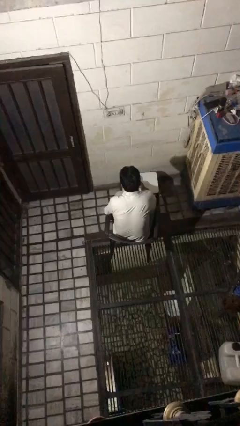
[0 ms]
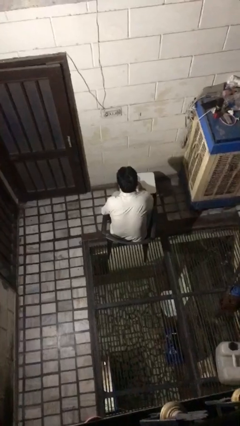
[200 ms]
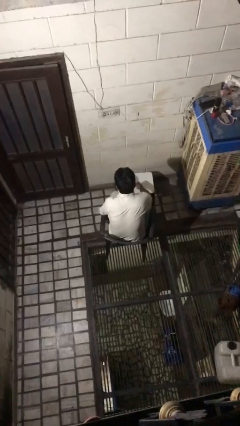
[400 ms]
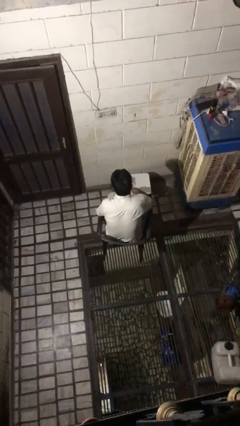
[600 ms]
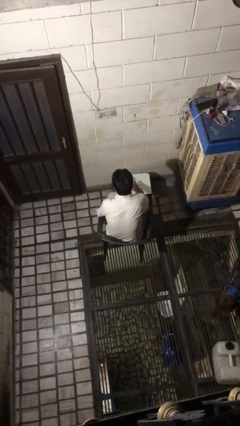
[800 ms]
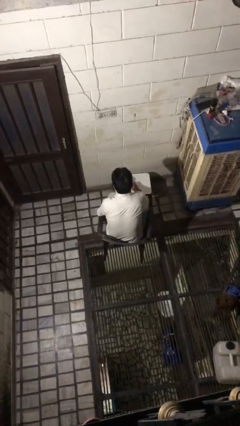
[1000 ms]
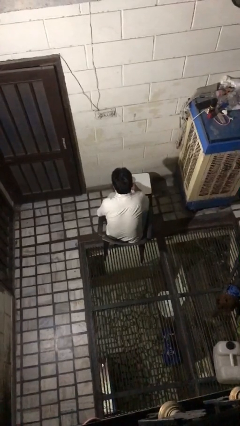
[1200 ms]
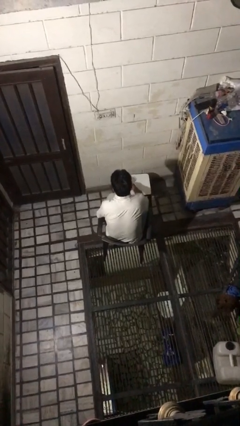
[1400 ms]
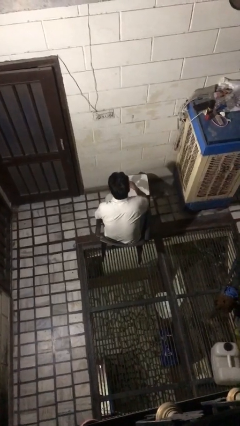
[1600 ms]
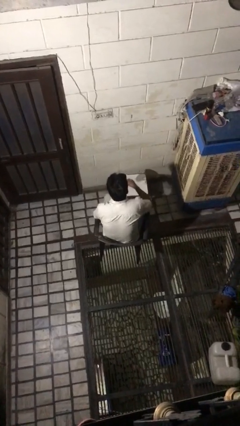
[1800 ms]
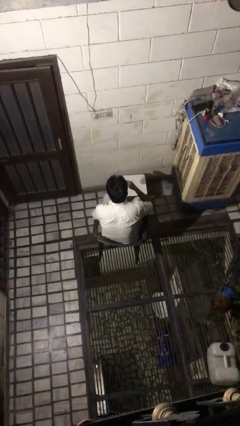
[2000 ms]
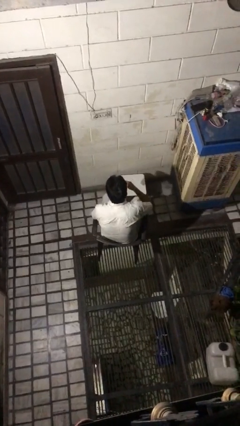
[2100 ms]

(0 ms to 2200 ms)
person picks up object from table

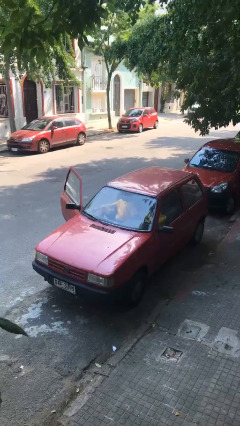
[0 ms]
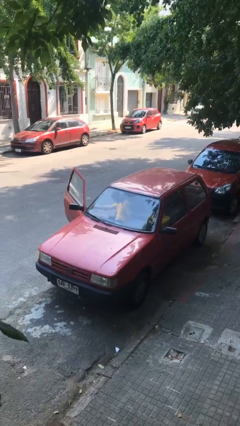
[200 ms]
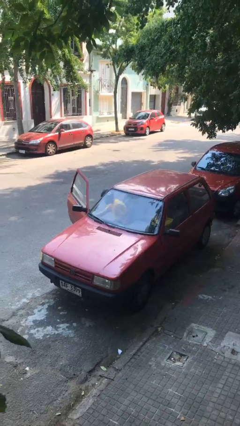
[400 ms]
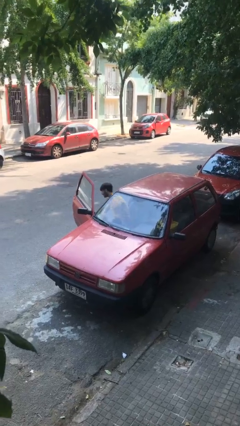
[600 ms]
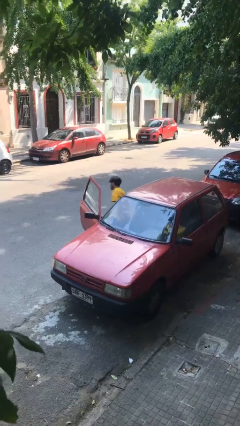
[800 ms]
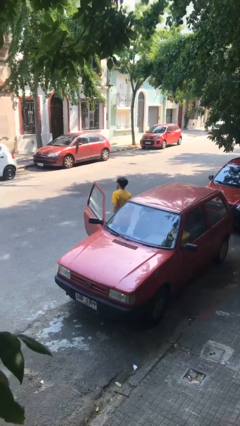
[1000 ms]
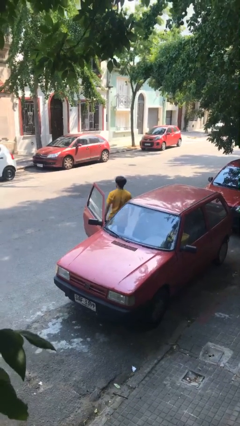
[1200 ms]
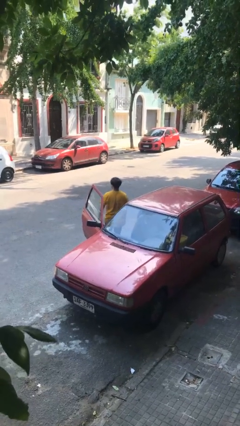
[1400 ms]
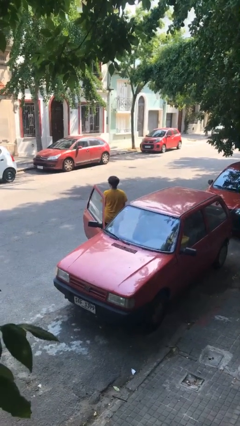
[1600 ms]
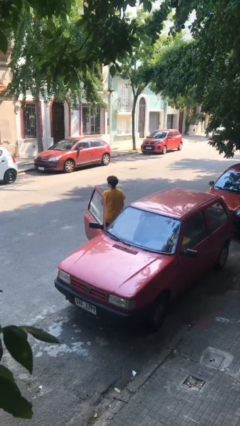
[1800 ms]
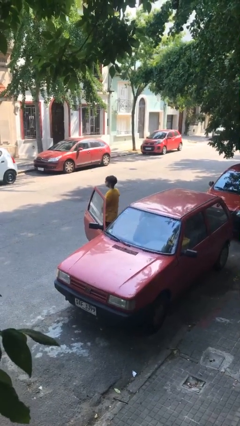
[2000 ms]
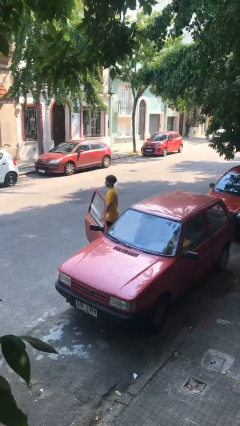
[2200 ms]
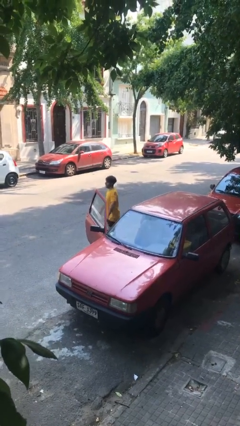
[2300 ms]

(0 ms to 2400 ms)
person exits car

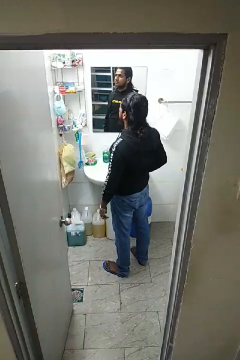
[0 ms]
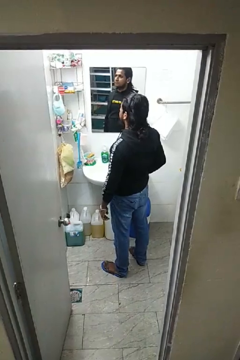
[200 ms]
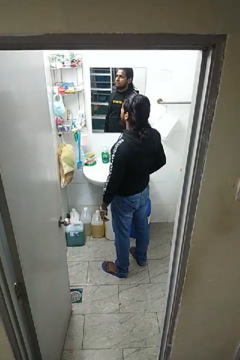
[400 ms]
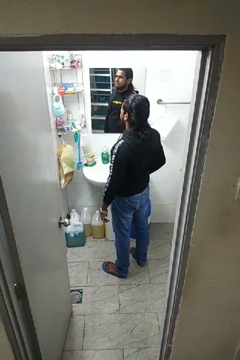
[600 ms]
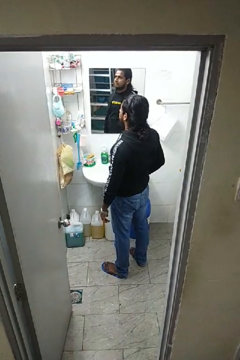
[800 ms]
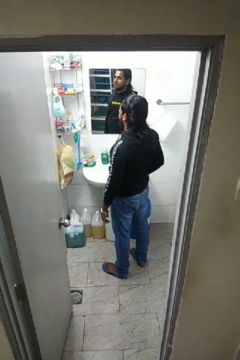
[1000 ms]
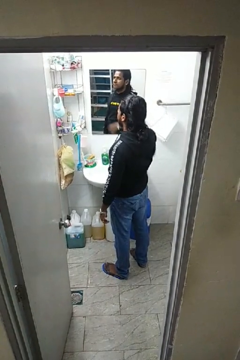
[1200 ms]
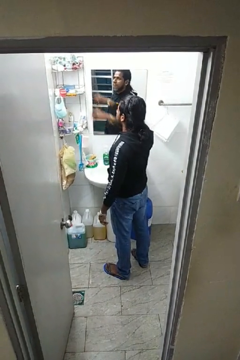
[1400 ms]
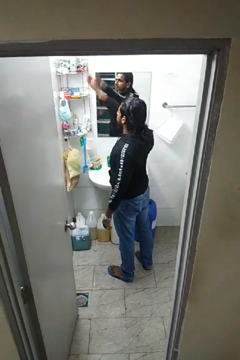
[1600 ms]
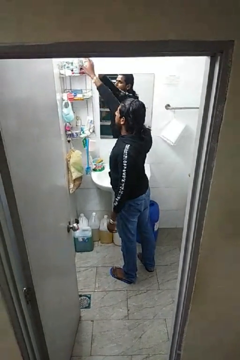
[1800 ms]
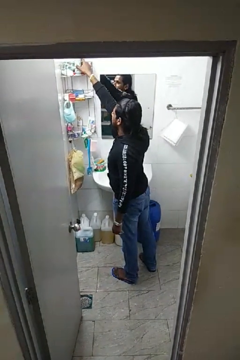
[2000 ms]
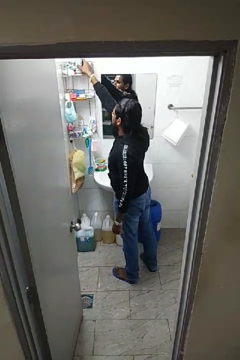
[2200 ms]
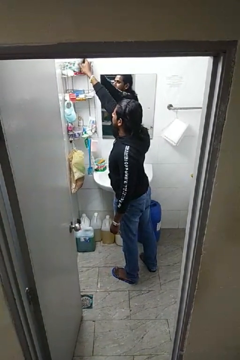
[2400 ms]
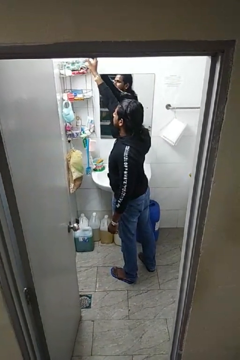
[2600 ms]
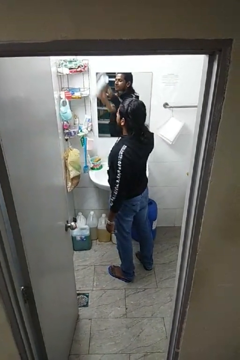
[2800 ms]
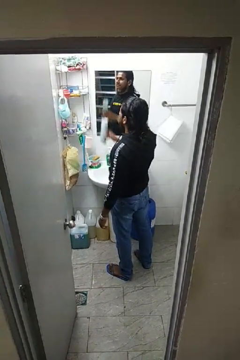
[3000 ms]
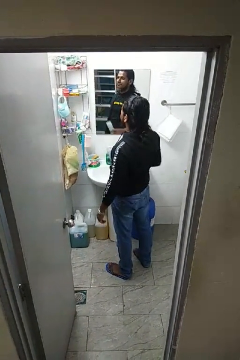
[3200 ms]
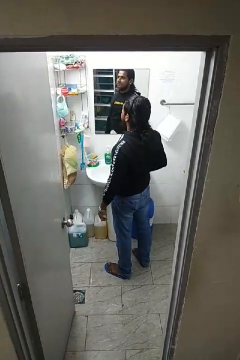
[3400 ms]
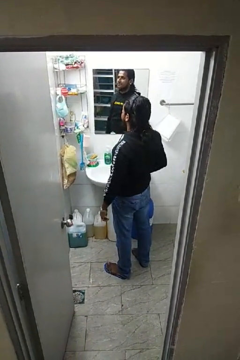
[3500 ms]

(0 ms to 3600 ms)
person picks up object from countertop

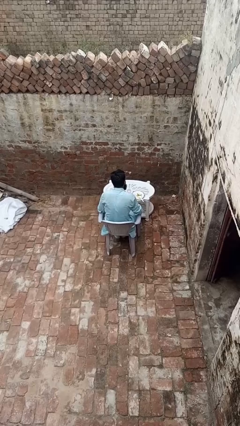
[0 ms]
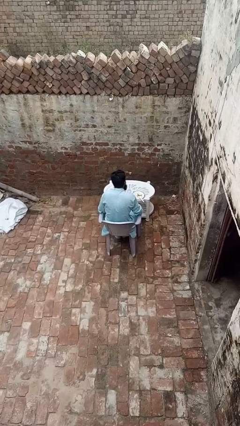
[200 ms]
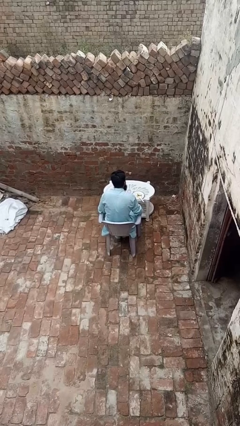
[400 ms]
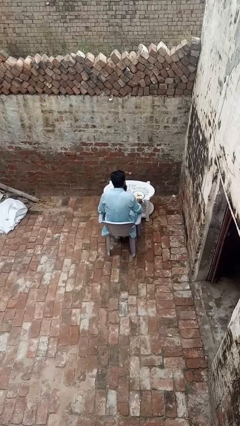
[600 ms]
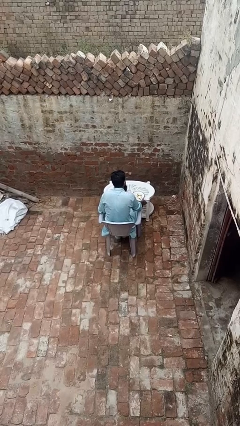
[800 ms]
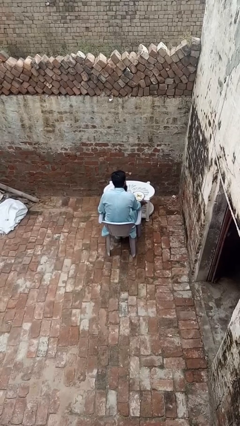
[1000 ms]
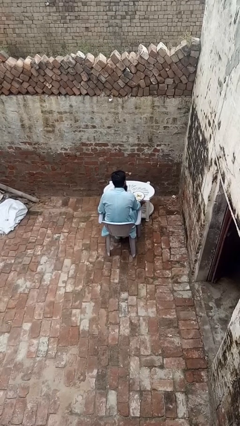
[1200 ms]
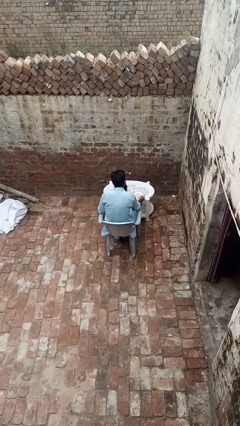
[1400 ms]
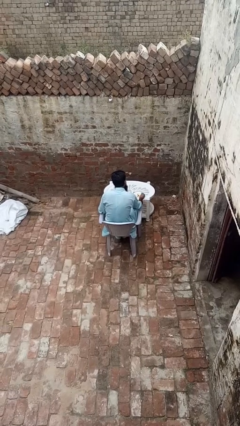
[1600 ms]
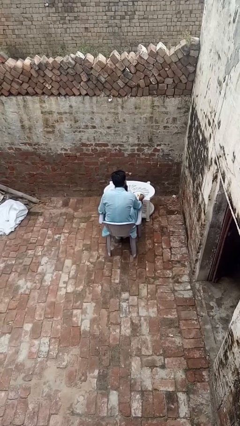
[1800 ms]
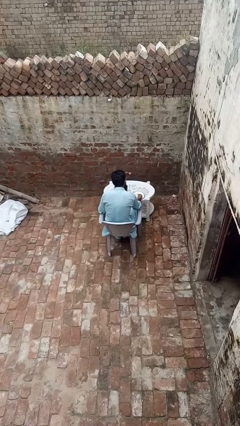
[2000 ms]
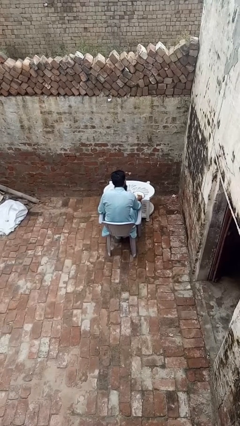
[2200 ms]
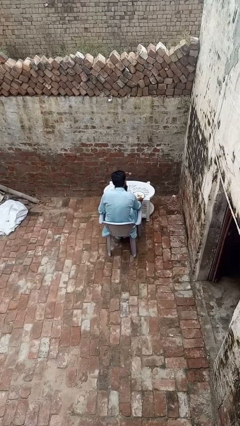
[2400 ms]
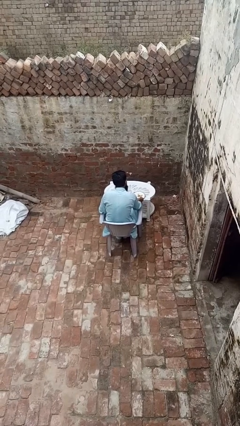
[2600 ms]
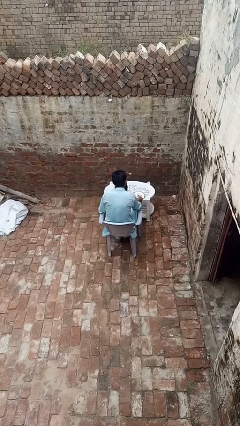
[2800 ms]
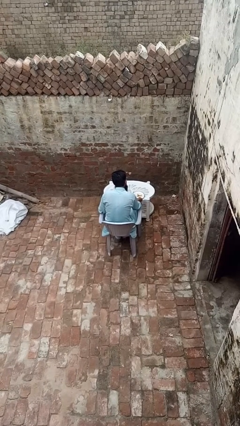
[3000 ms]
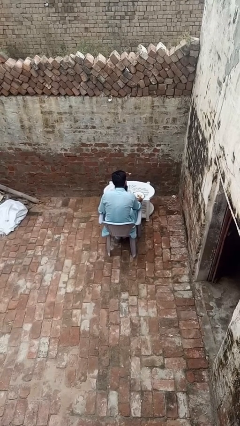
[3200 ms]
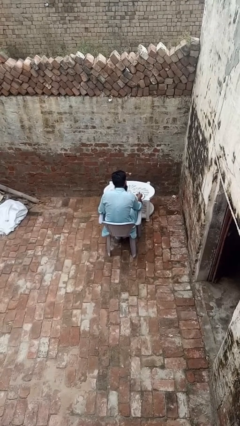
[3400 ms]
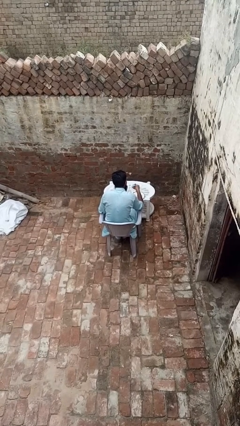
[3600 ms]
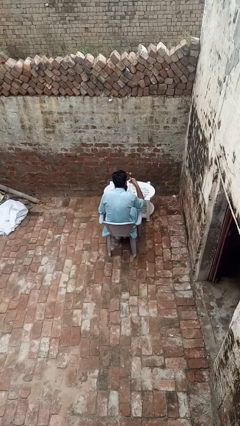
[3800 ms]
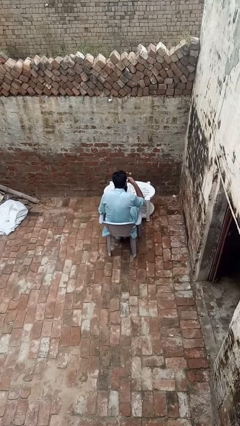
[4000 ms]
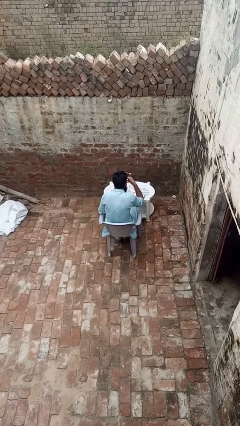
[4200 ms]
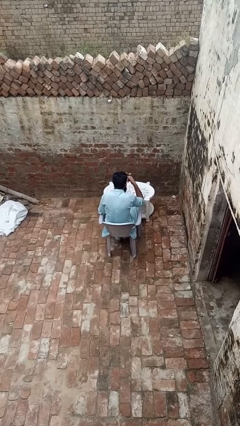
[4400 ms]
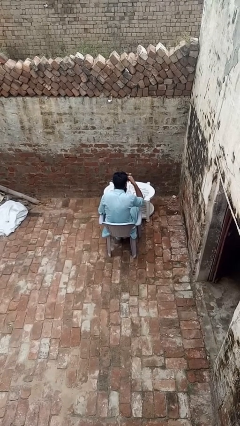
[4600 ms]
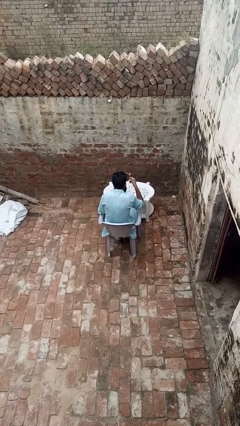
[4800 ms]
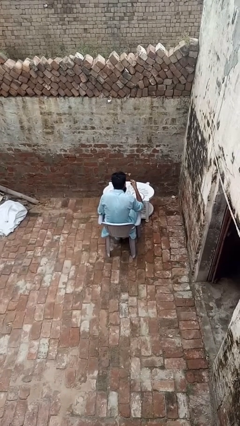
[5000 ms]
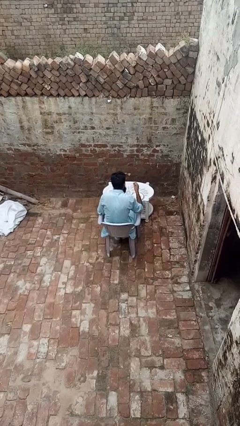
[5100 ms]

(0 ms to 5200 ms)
person eats with utensil

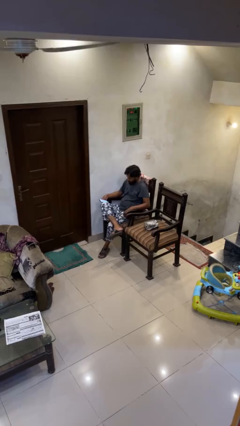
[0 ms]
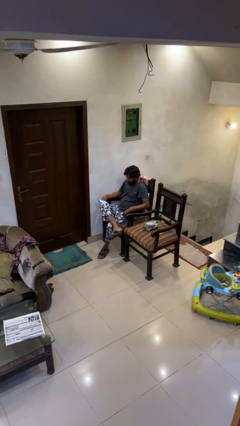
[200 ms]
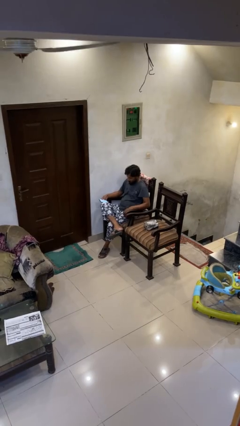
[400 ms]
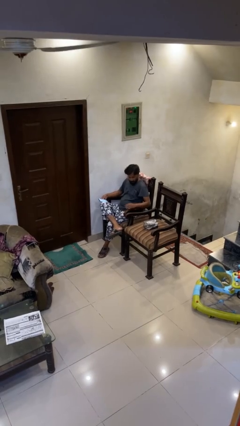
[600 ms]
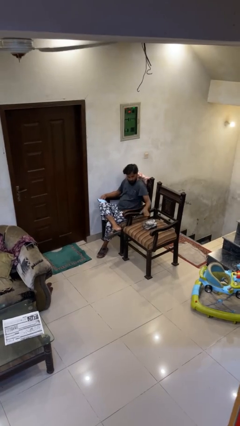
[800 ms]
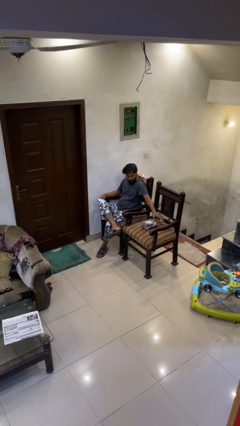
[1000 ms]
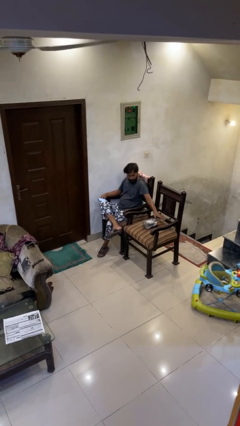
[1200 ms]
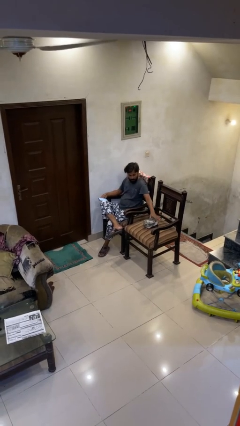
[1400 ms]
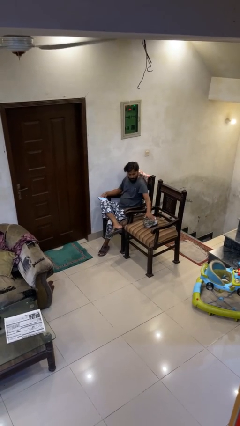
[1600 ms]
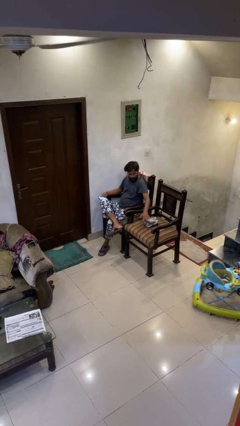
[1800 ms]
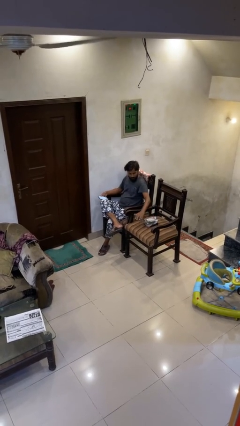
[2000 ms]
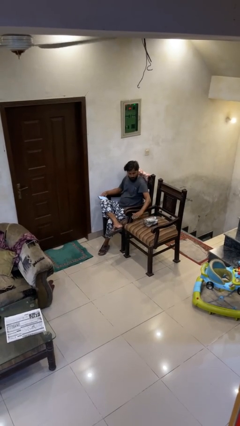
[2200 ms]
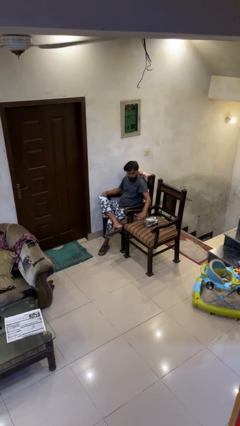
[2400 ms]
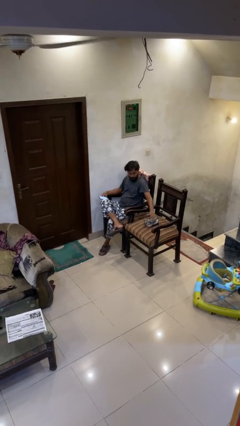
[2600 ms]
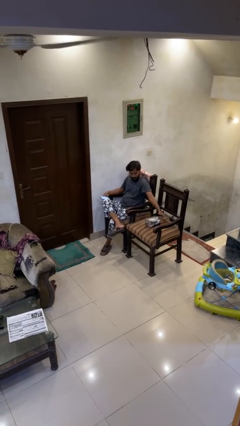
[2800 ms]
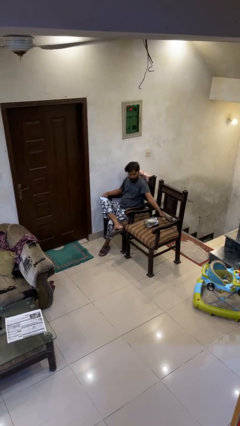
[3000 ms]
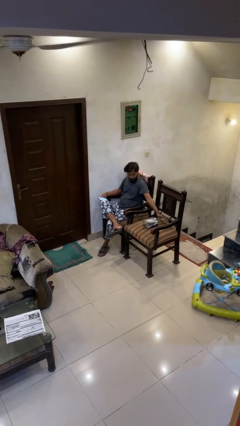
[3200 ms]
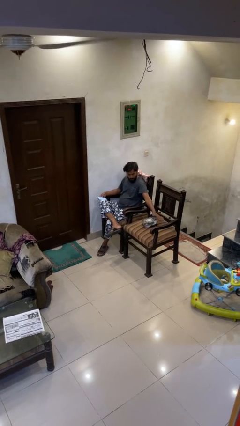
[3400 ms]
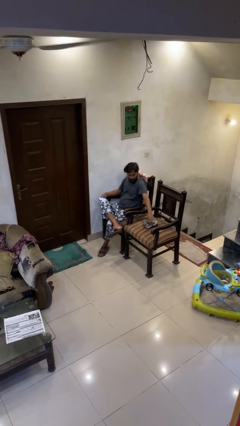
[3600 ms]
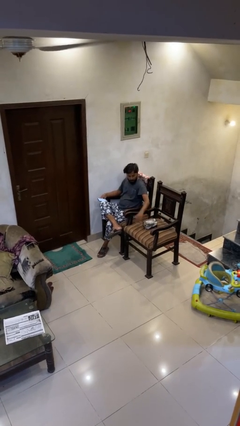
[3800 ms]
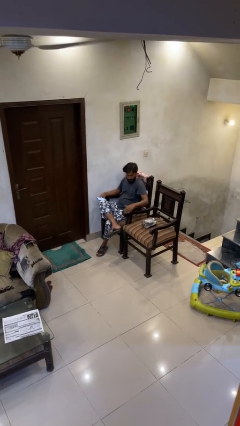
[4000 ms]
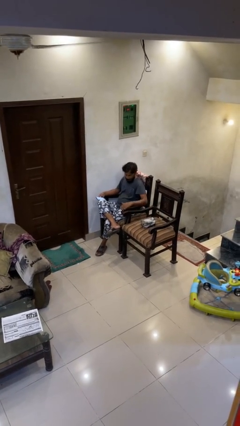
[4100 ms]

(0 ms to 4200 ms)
person waves hand over object

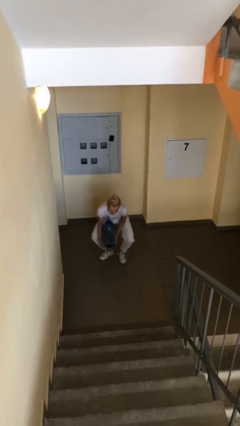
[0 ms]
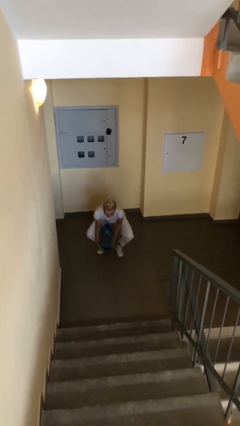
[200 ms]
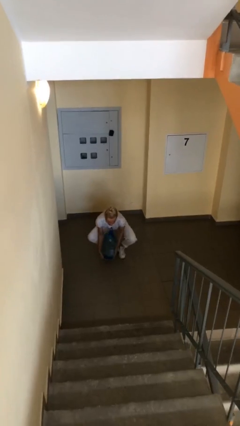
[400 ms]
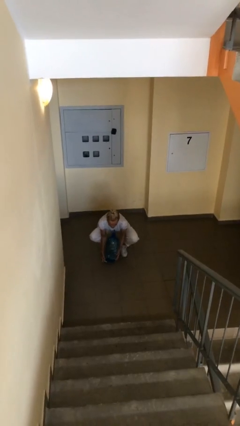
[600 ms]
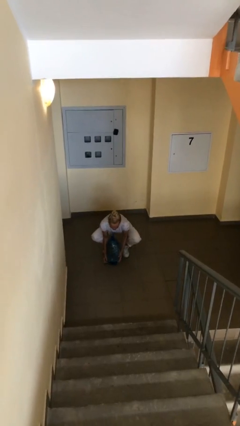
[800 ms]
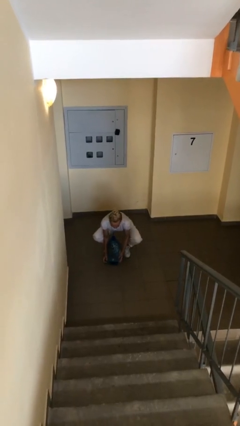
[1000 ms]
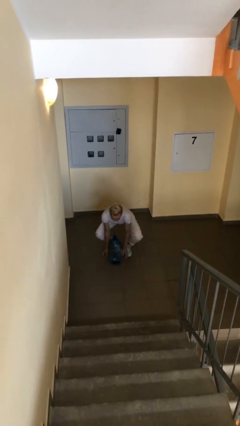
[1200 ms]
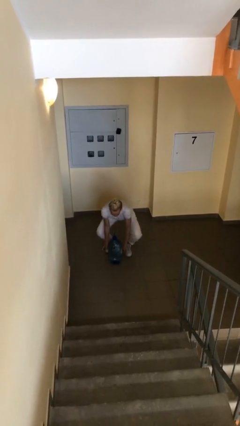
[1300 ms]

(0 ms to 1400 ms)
person puts down object on floor
